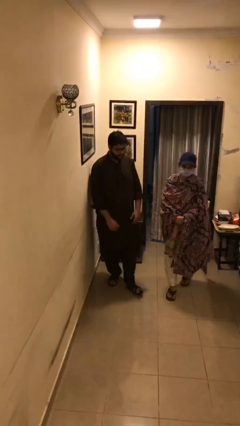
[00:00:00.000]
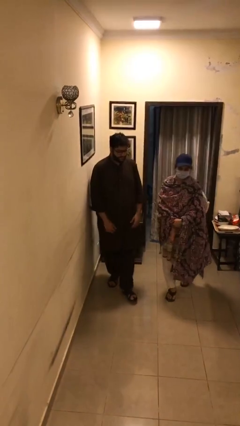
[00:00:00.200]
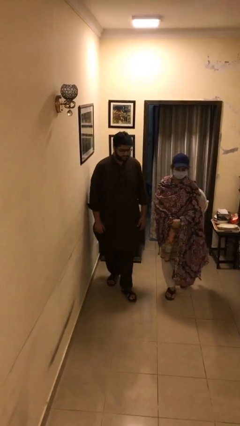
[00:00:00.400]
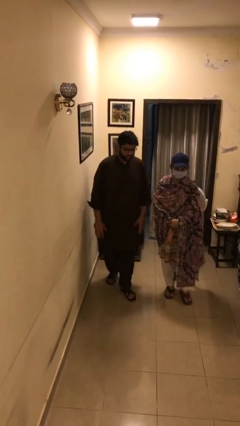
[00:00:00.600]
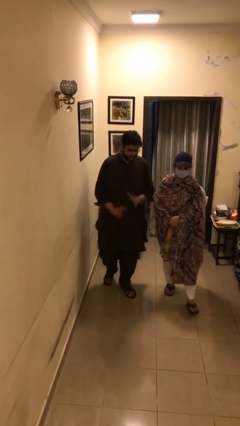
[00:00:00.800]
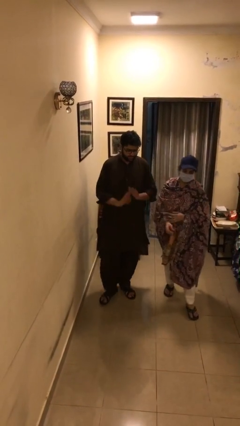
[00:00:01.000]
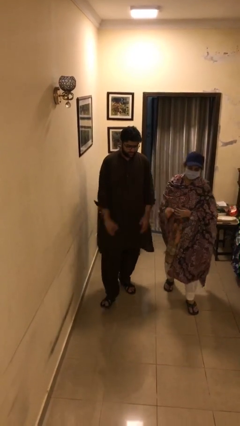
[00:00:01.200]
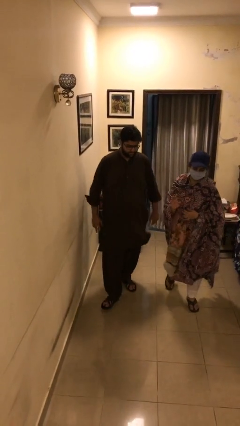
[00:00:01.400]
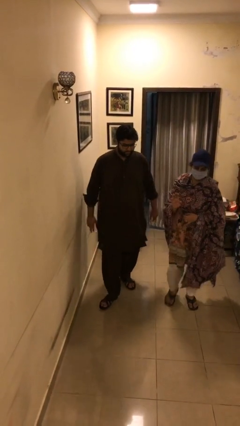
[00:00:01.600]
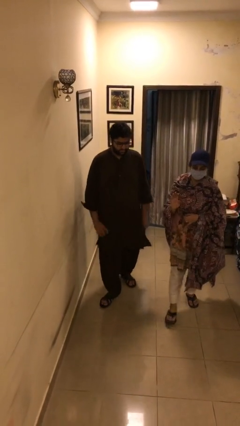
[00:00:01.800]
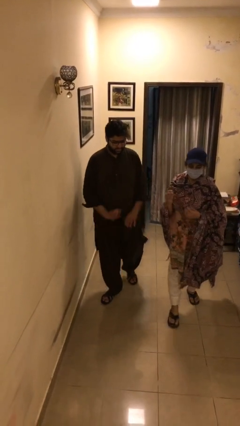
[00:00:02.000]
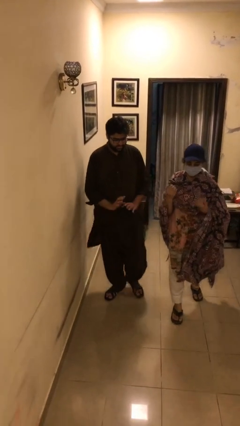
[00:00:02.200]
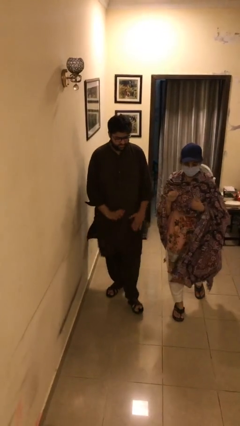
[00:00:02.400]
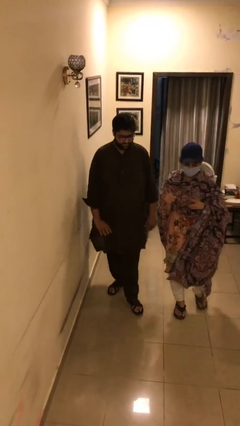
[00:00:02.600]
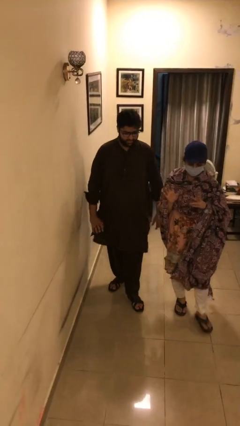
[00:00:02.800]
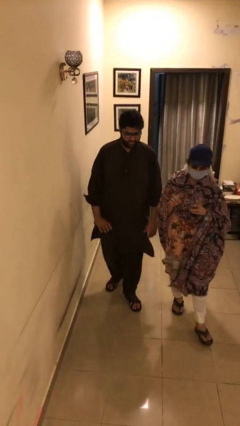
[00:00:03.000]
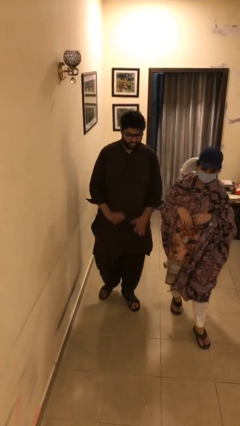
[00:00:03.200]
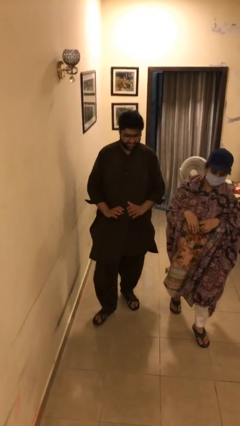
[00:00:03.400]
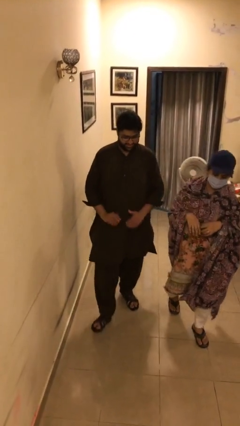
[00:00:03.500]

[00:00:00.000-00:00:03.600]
person talks to person

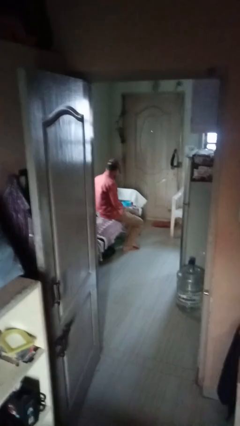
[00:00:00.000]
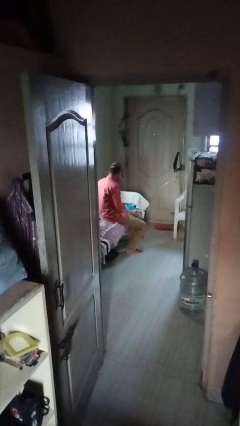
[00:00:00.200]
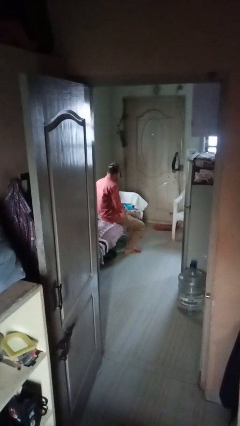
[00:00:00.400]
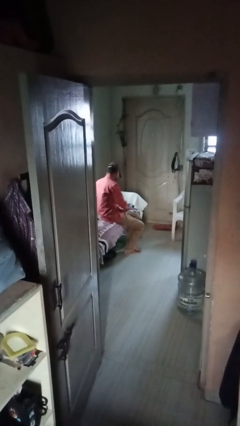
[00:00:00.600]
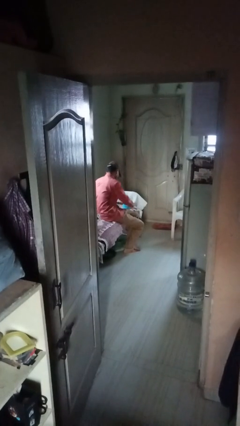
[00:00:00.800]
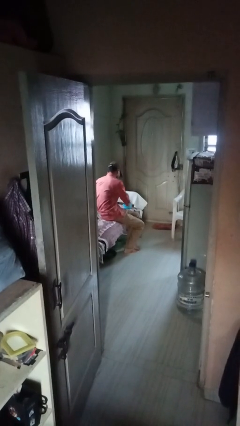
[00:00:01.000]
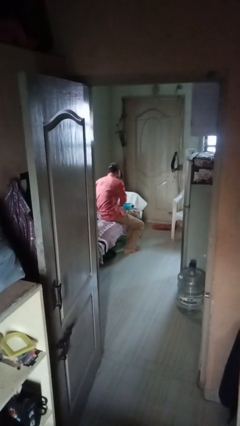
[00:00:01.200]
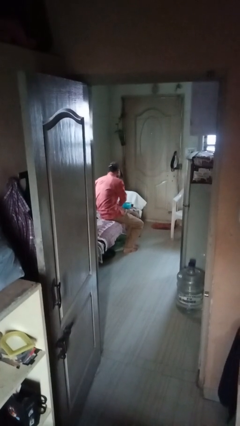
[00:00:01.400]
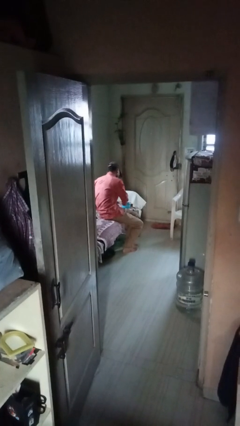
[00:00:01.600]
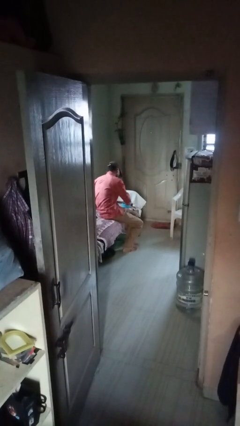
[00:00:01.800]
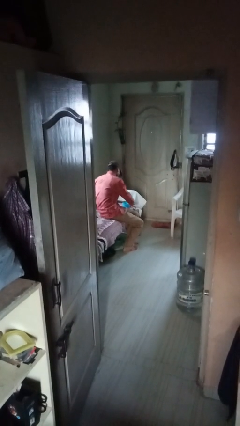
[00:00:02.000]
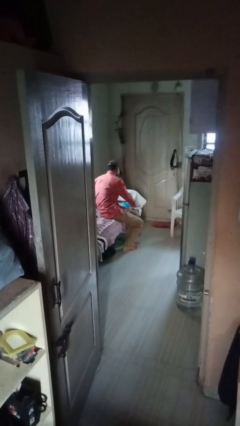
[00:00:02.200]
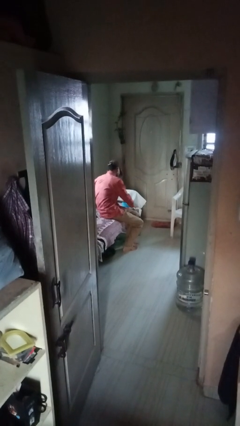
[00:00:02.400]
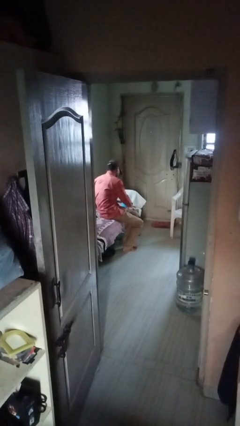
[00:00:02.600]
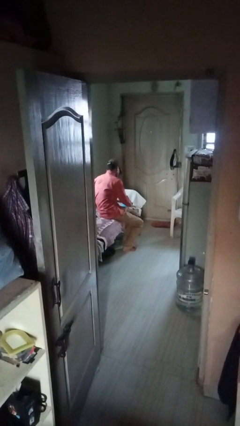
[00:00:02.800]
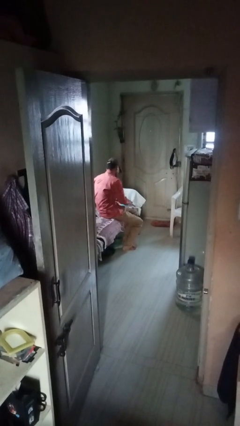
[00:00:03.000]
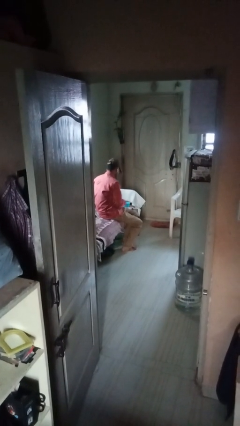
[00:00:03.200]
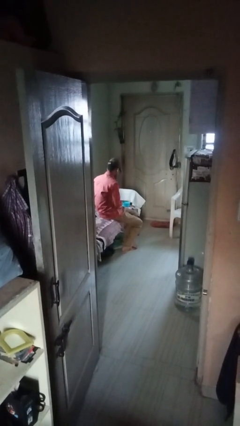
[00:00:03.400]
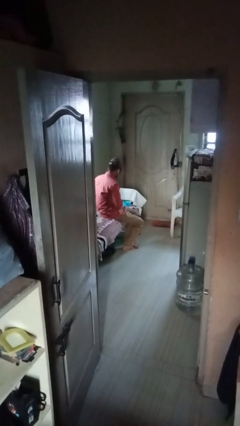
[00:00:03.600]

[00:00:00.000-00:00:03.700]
person waves hand over object

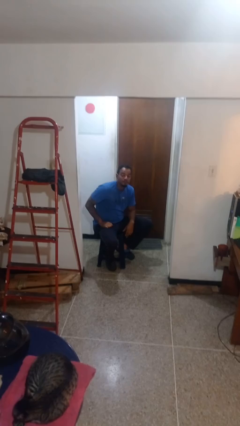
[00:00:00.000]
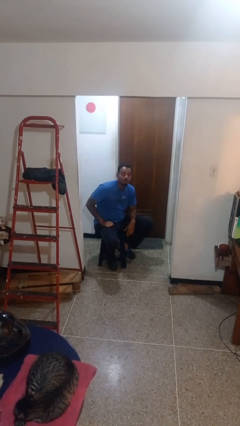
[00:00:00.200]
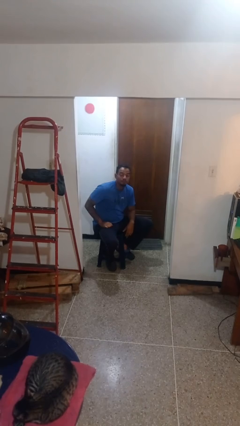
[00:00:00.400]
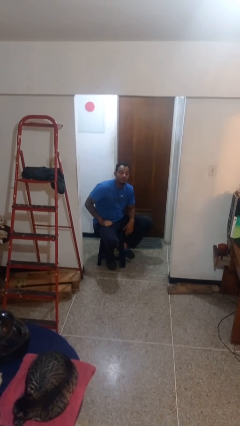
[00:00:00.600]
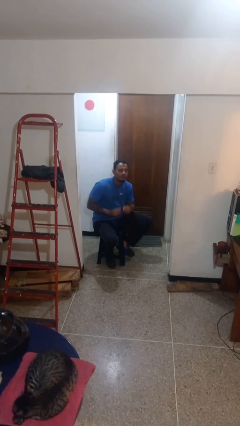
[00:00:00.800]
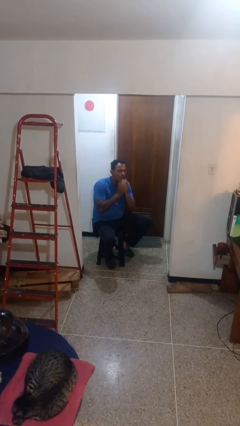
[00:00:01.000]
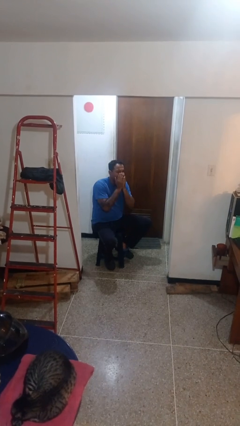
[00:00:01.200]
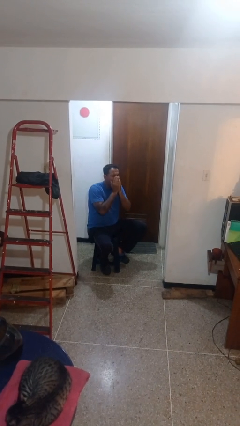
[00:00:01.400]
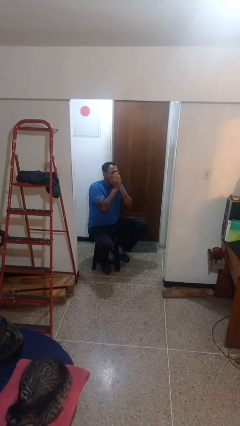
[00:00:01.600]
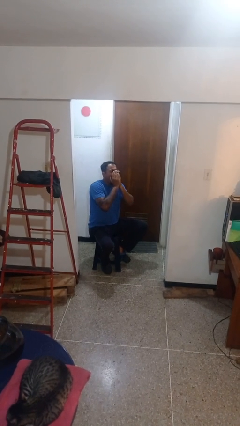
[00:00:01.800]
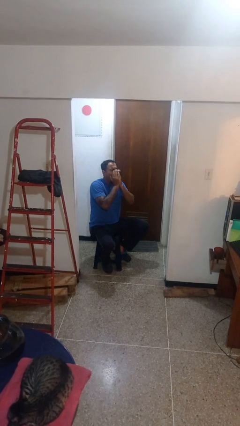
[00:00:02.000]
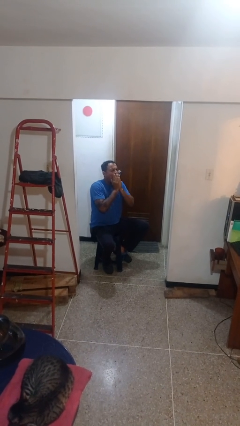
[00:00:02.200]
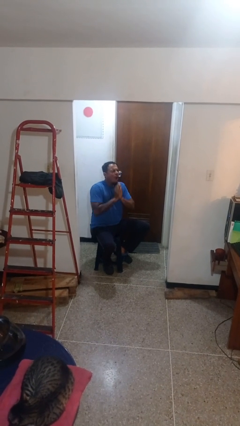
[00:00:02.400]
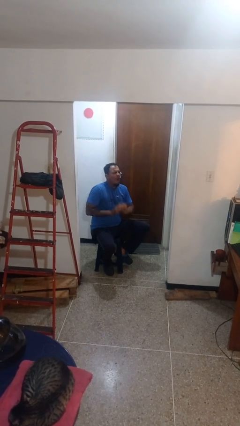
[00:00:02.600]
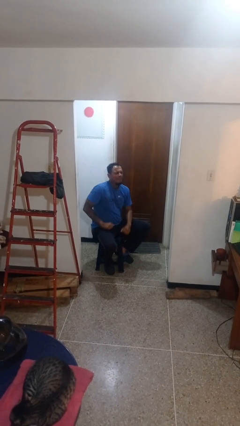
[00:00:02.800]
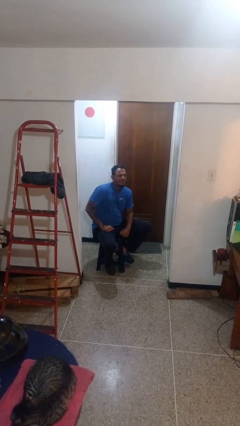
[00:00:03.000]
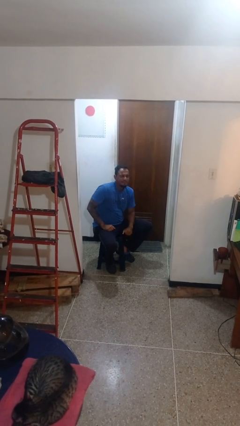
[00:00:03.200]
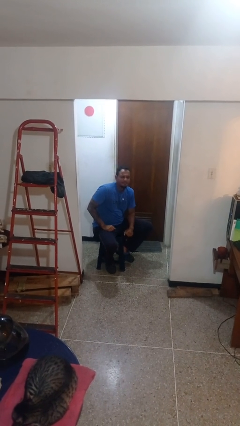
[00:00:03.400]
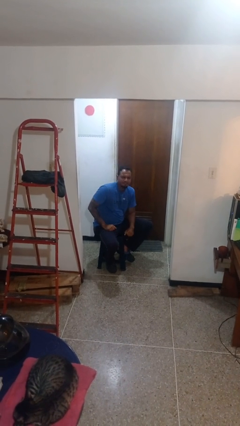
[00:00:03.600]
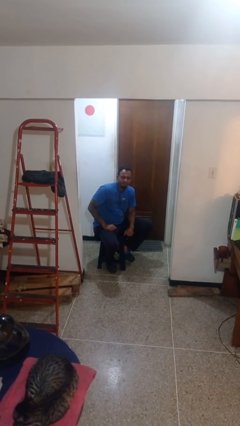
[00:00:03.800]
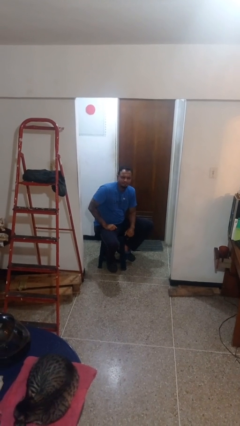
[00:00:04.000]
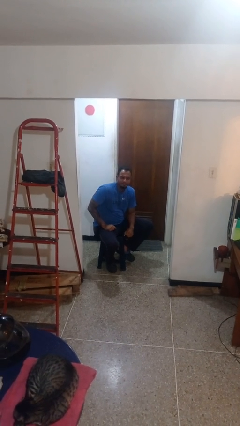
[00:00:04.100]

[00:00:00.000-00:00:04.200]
person yawns

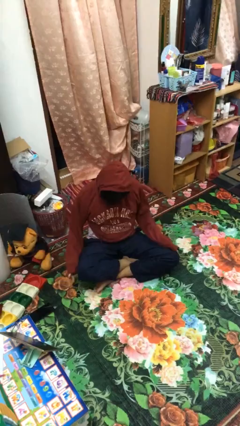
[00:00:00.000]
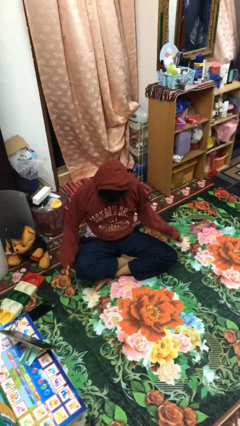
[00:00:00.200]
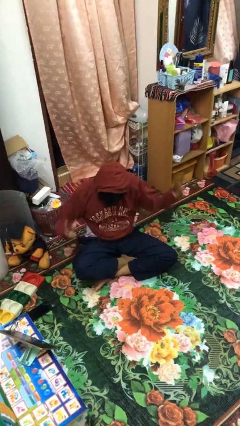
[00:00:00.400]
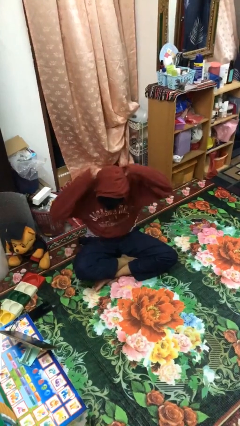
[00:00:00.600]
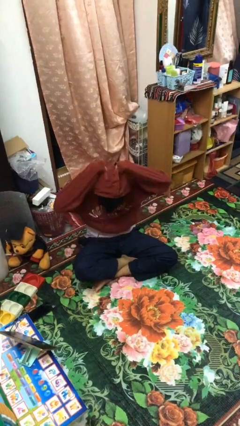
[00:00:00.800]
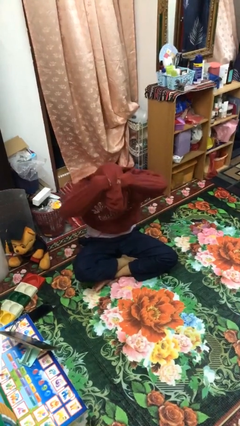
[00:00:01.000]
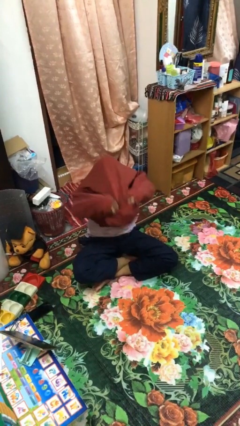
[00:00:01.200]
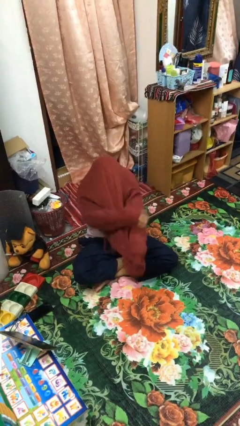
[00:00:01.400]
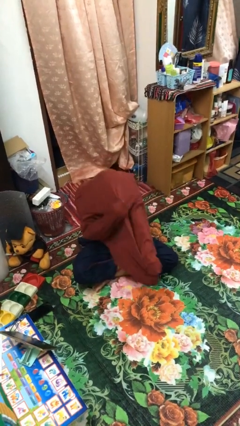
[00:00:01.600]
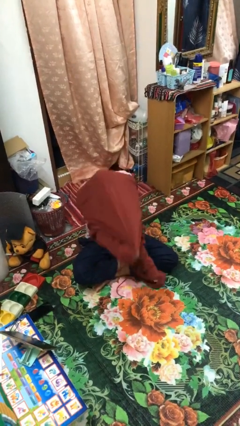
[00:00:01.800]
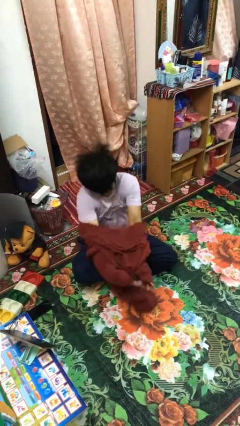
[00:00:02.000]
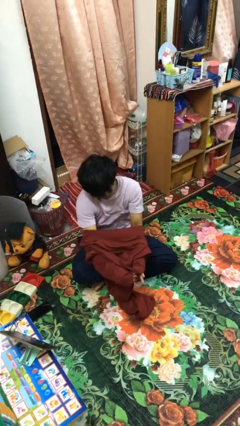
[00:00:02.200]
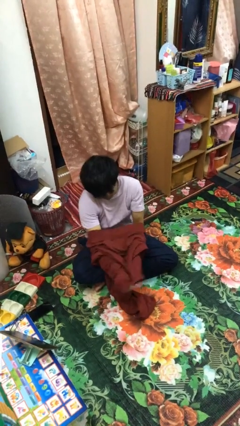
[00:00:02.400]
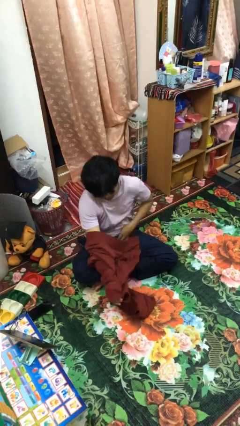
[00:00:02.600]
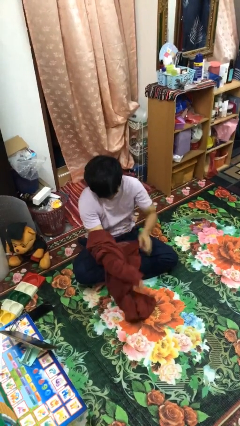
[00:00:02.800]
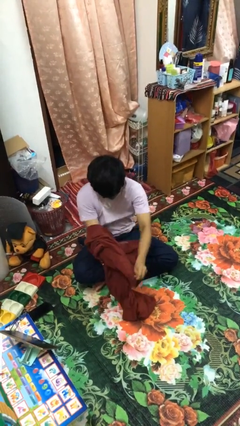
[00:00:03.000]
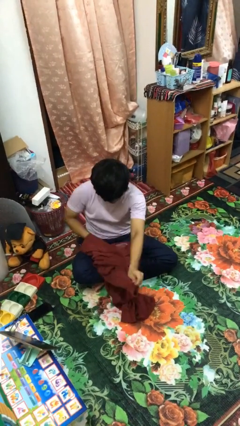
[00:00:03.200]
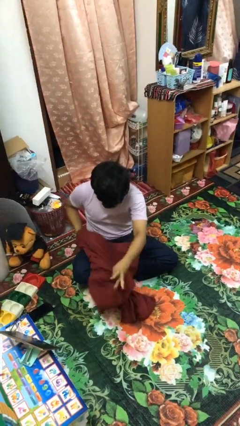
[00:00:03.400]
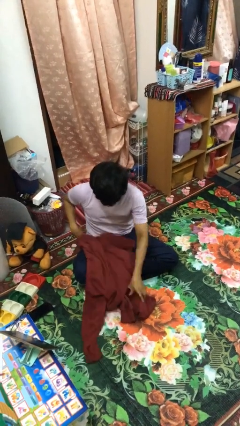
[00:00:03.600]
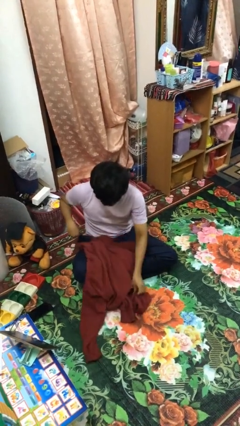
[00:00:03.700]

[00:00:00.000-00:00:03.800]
person takes off hoodie

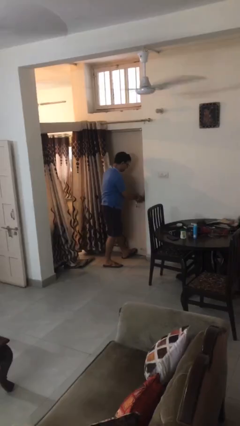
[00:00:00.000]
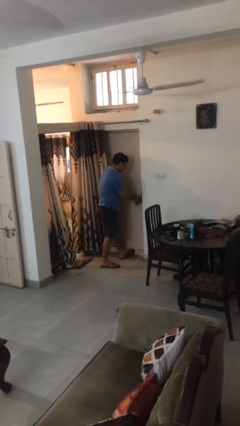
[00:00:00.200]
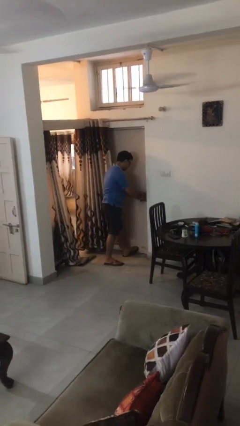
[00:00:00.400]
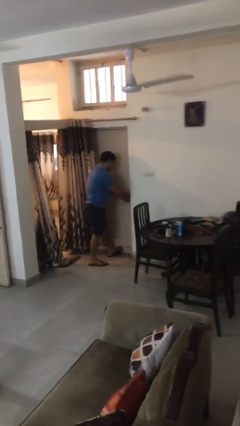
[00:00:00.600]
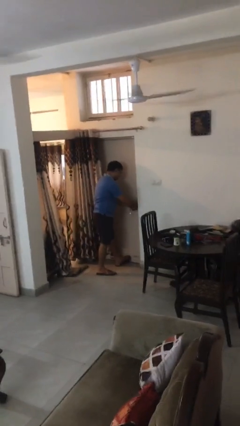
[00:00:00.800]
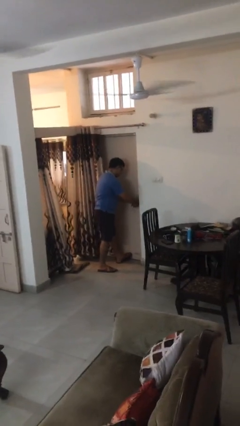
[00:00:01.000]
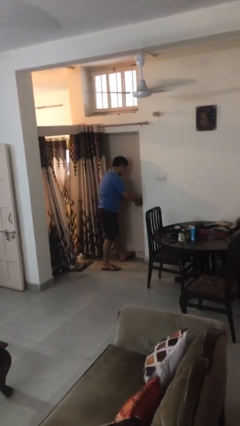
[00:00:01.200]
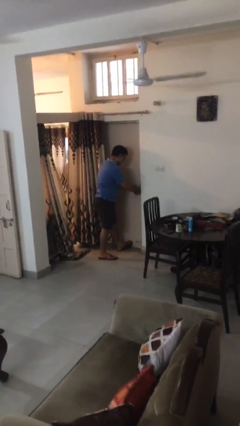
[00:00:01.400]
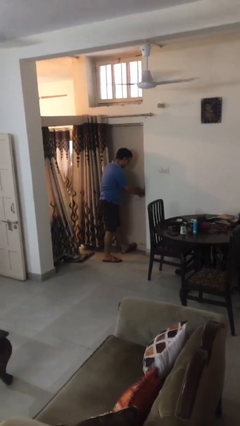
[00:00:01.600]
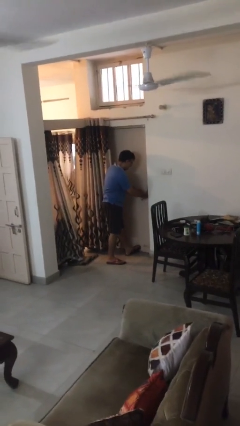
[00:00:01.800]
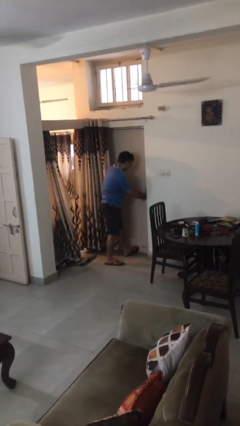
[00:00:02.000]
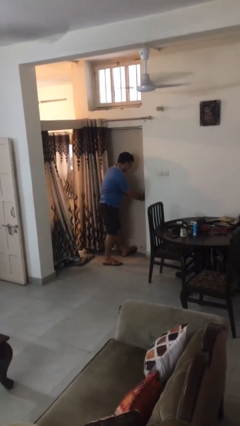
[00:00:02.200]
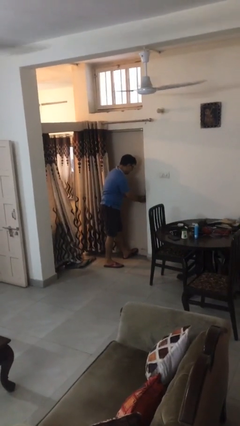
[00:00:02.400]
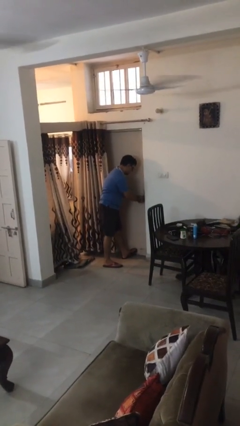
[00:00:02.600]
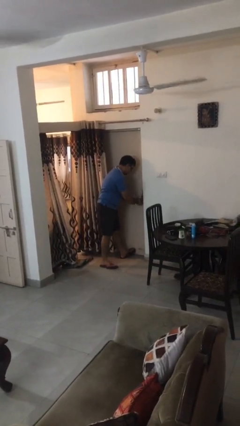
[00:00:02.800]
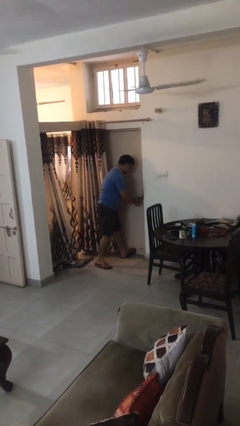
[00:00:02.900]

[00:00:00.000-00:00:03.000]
person locks door with keys
